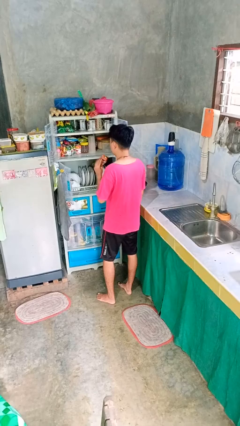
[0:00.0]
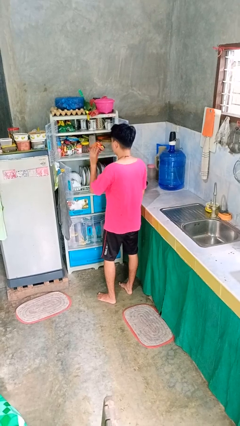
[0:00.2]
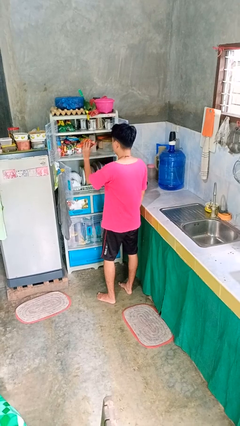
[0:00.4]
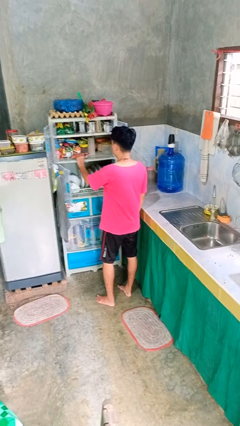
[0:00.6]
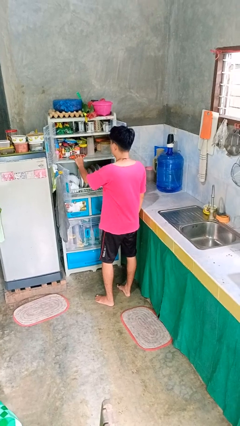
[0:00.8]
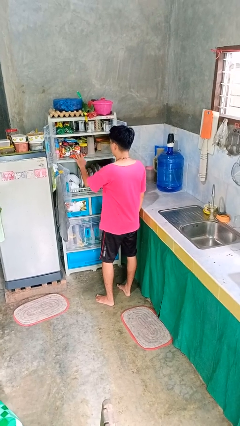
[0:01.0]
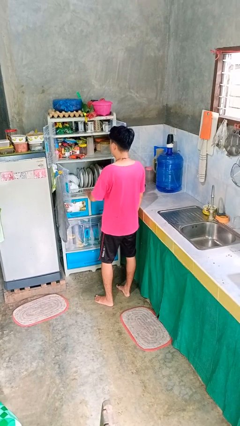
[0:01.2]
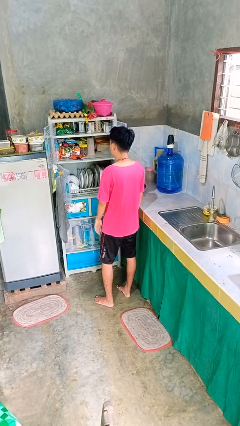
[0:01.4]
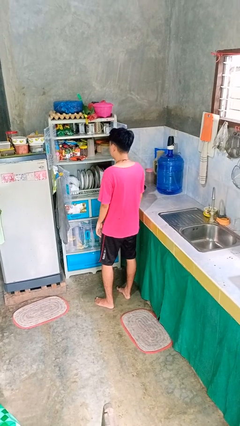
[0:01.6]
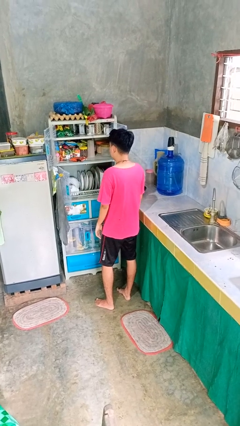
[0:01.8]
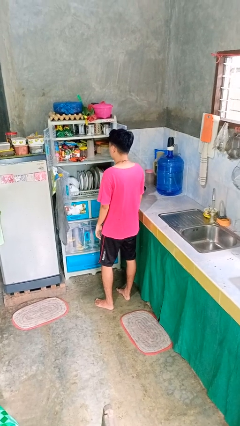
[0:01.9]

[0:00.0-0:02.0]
person puts object in cabinet

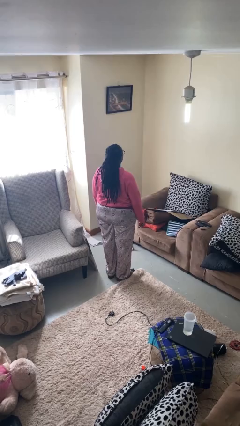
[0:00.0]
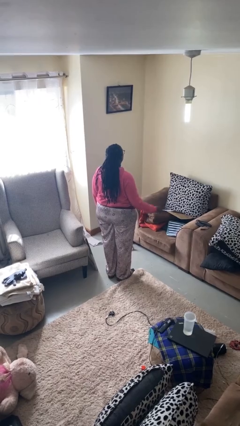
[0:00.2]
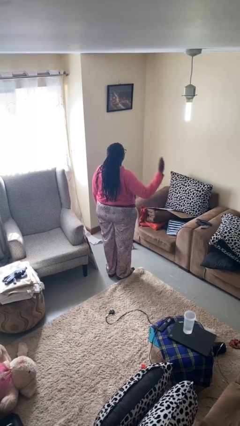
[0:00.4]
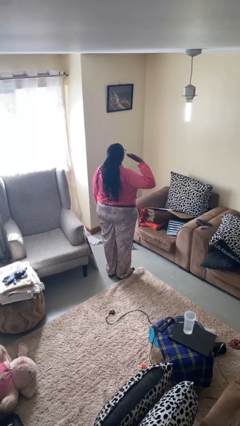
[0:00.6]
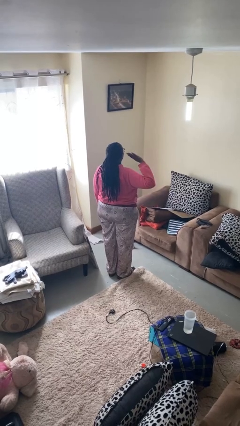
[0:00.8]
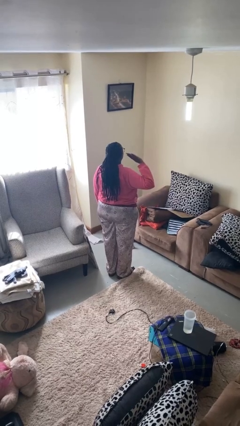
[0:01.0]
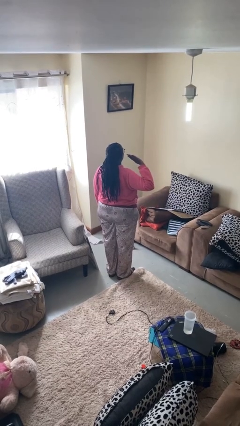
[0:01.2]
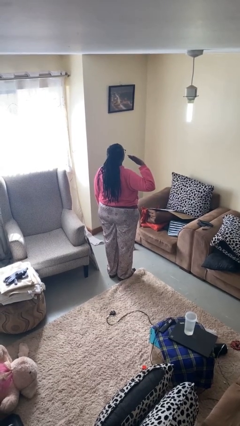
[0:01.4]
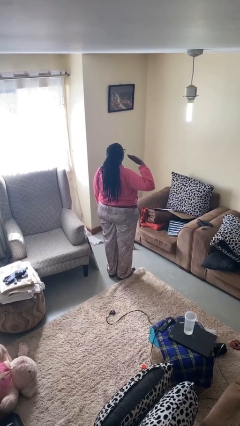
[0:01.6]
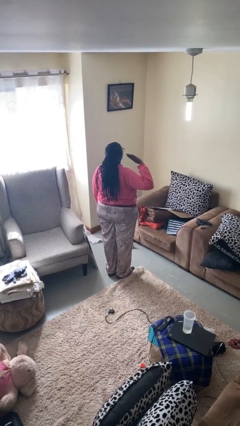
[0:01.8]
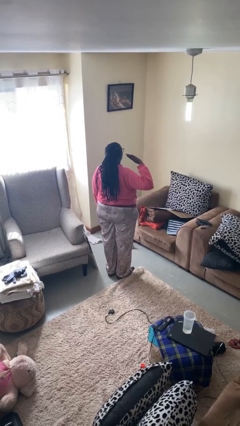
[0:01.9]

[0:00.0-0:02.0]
person salutes

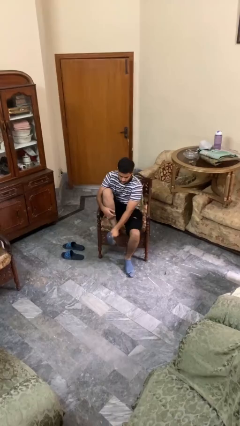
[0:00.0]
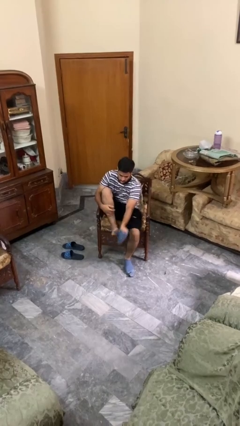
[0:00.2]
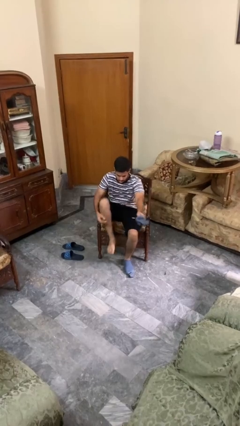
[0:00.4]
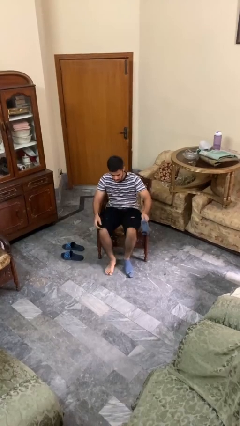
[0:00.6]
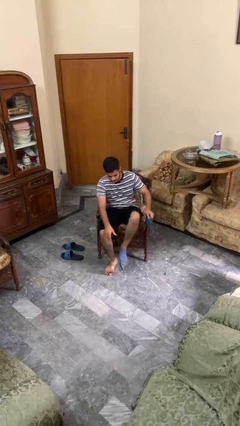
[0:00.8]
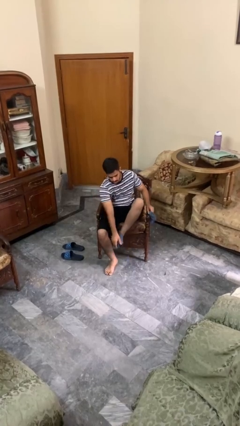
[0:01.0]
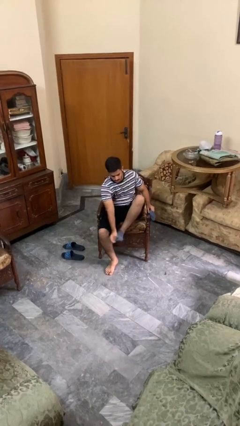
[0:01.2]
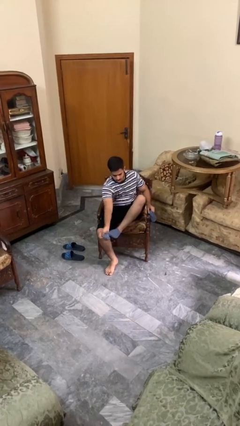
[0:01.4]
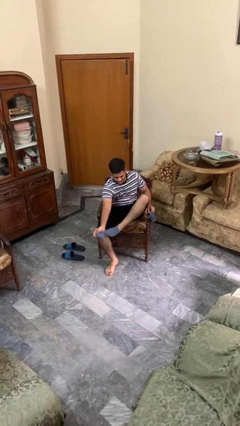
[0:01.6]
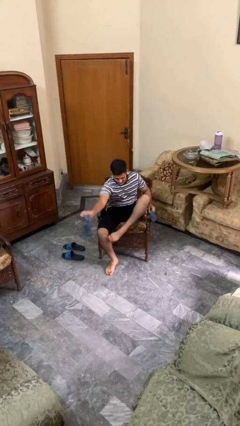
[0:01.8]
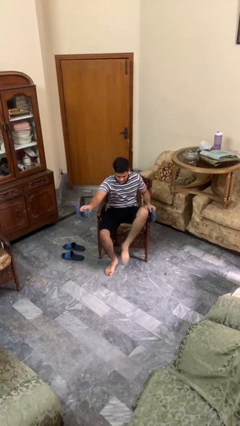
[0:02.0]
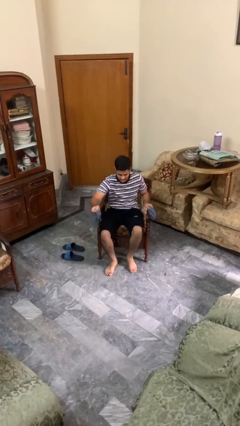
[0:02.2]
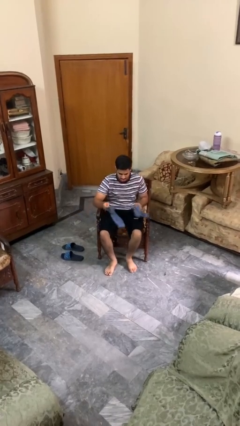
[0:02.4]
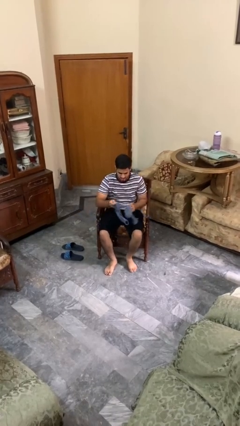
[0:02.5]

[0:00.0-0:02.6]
person takes off socks

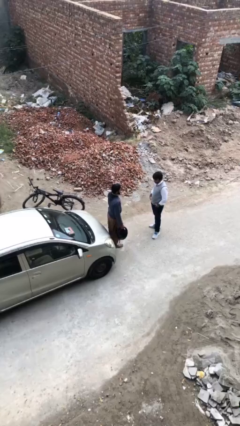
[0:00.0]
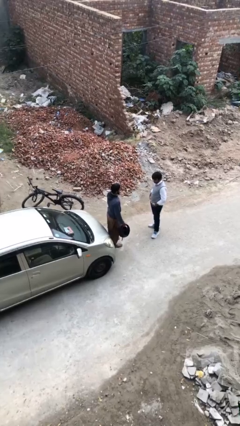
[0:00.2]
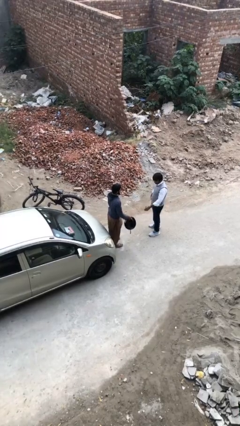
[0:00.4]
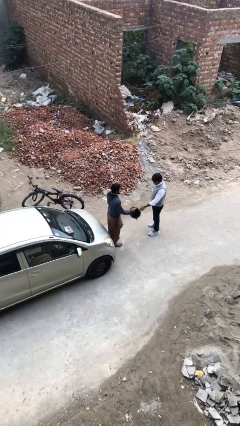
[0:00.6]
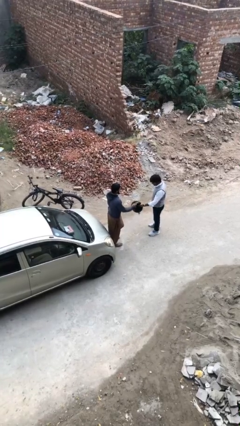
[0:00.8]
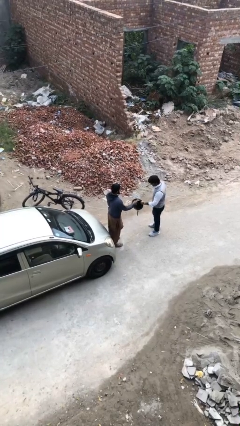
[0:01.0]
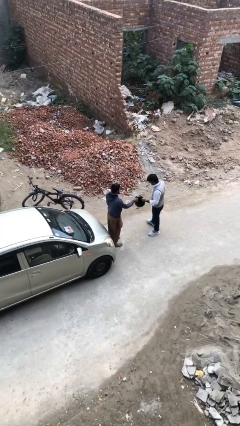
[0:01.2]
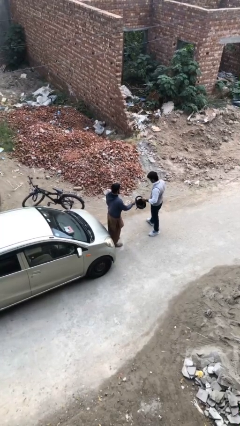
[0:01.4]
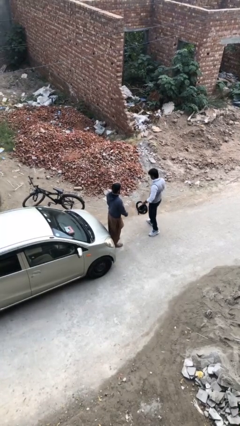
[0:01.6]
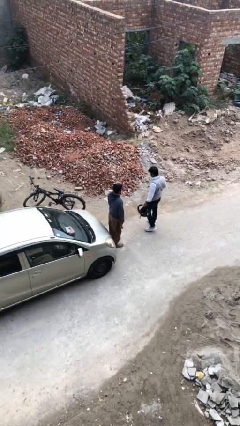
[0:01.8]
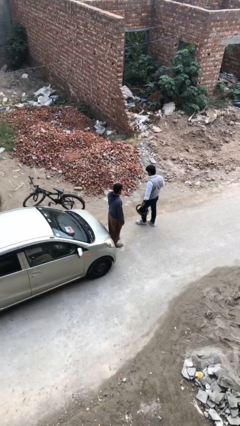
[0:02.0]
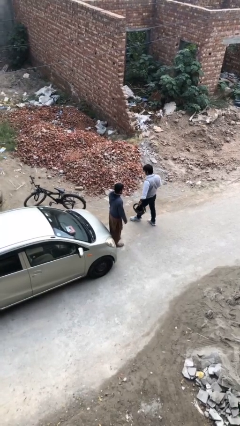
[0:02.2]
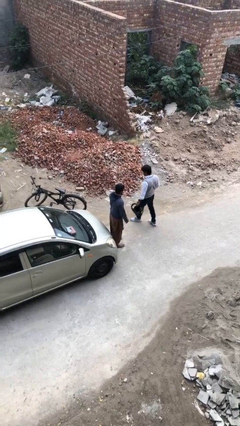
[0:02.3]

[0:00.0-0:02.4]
person transfers object to person

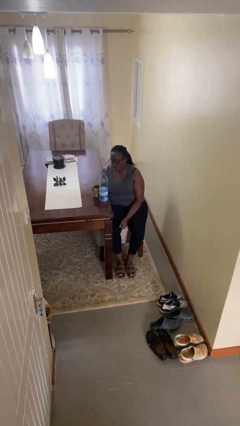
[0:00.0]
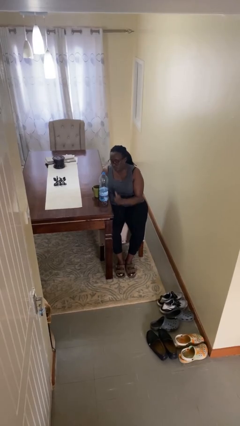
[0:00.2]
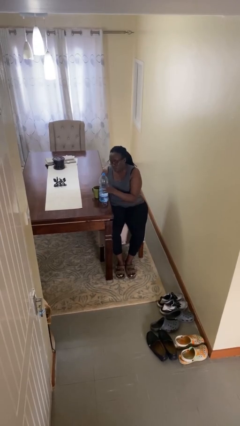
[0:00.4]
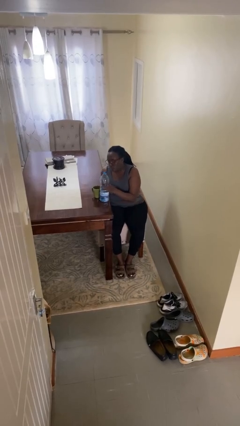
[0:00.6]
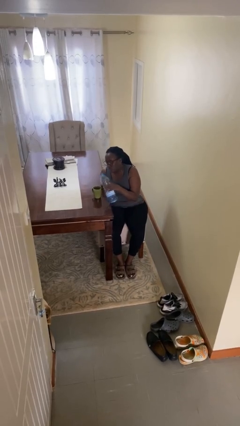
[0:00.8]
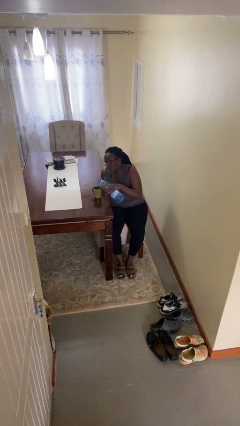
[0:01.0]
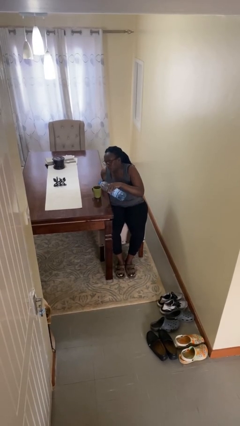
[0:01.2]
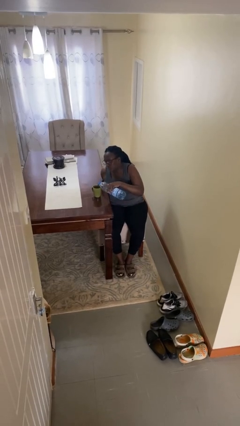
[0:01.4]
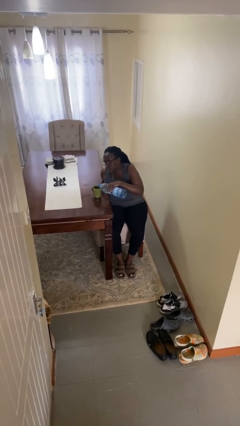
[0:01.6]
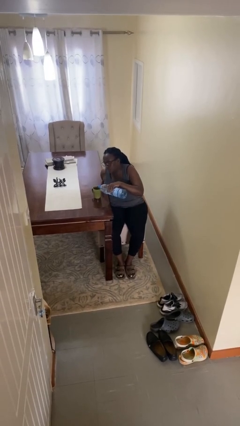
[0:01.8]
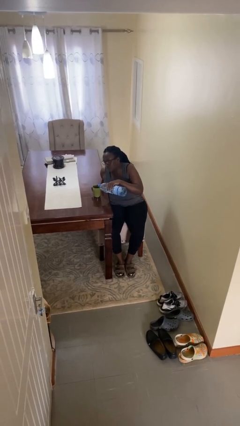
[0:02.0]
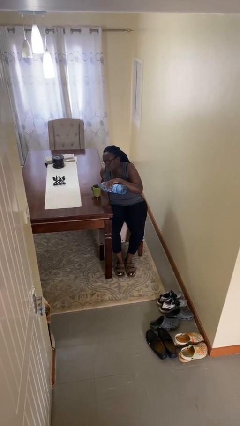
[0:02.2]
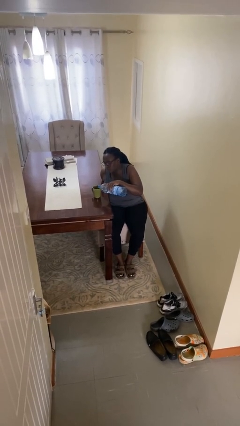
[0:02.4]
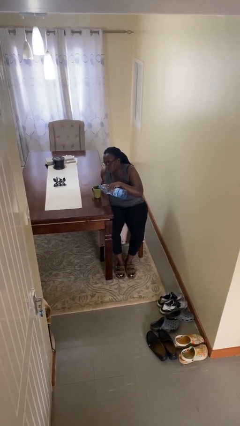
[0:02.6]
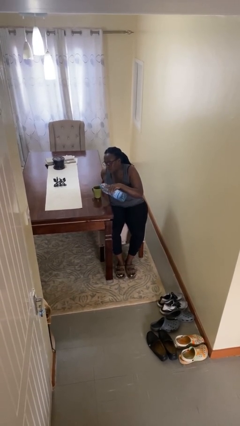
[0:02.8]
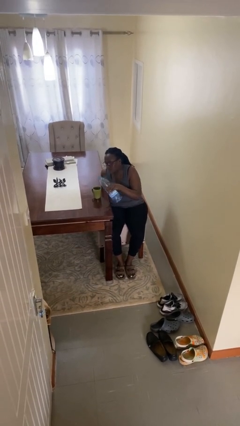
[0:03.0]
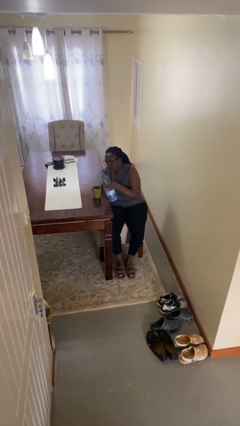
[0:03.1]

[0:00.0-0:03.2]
person pours liquid into cup

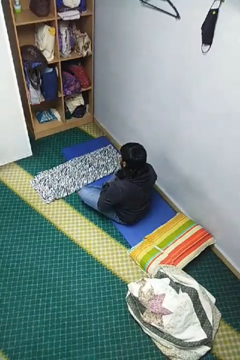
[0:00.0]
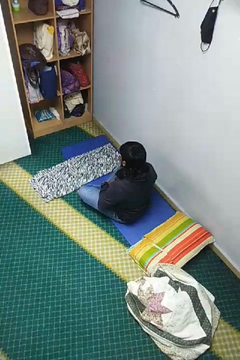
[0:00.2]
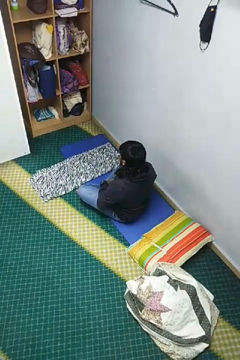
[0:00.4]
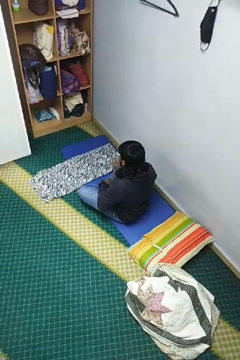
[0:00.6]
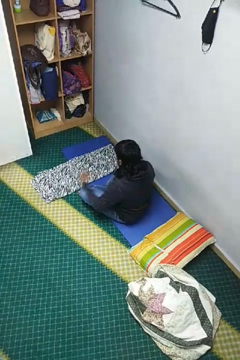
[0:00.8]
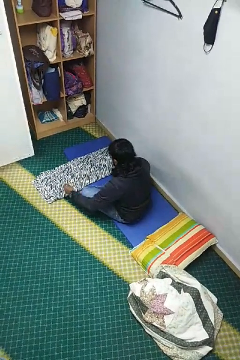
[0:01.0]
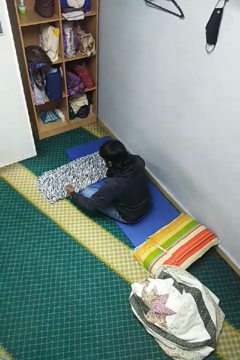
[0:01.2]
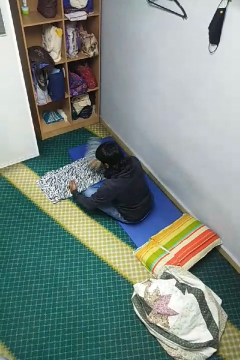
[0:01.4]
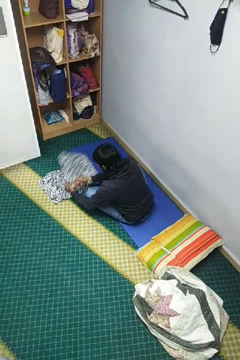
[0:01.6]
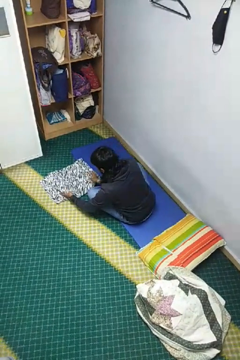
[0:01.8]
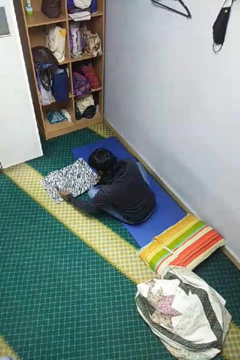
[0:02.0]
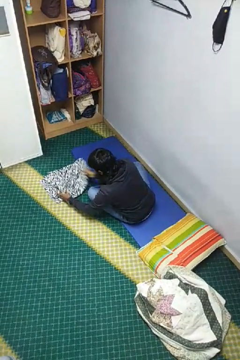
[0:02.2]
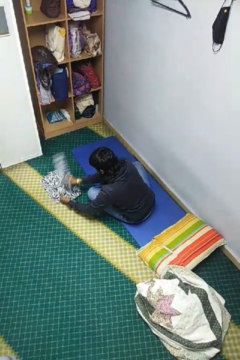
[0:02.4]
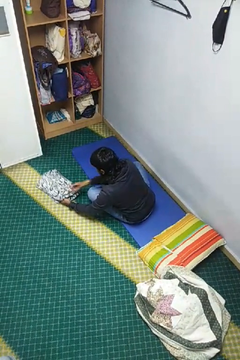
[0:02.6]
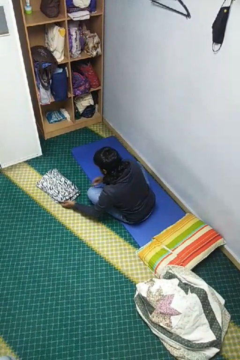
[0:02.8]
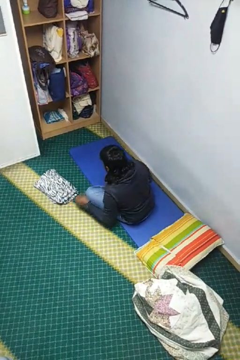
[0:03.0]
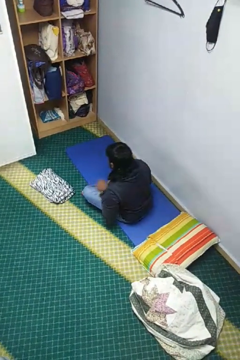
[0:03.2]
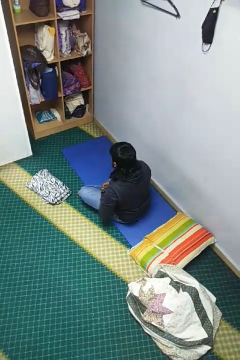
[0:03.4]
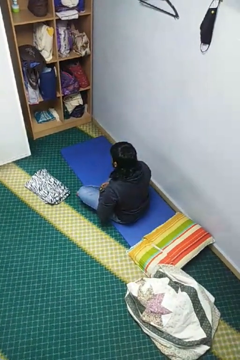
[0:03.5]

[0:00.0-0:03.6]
person folds blanket

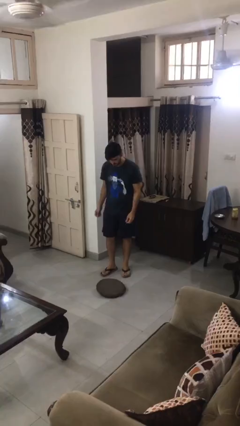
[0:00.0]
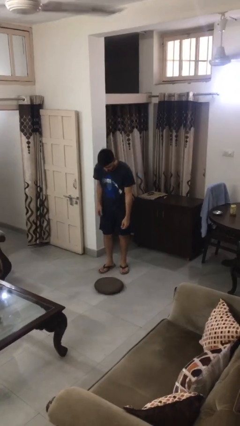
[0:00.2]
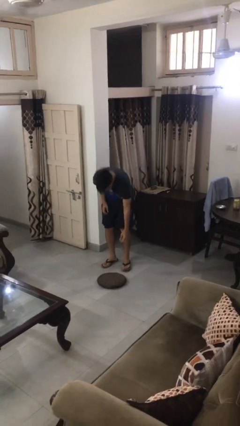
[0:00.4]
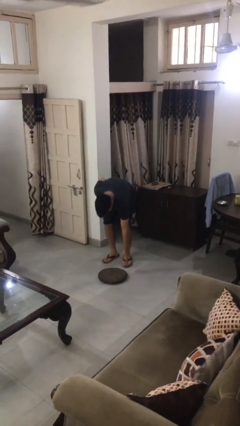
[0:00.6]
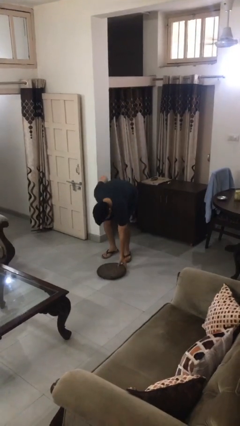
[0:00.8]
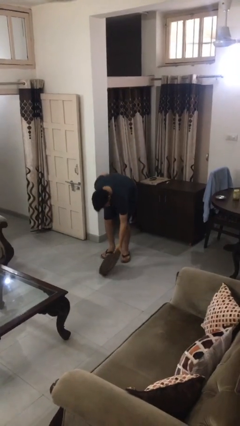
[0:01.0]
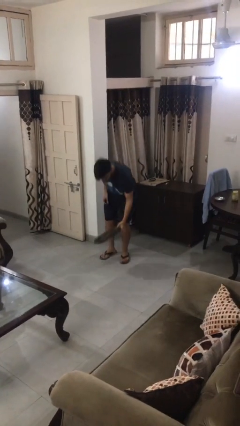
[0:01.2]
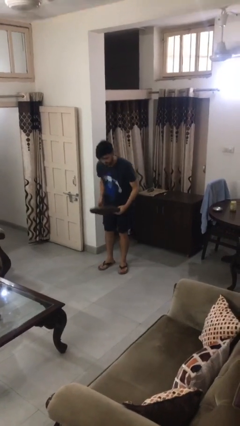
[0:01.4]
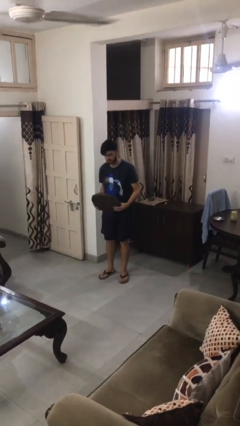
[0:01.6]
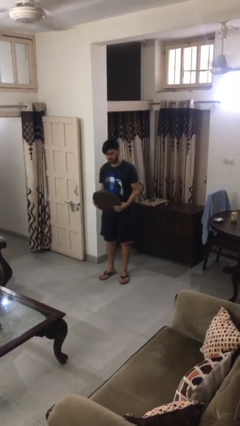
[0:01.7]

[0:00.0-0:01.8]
person picks up object from floor
